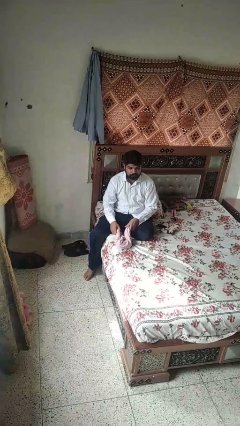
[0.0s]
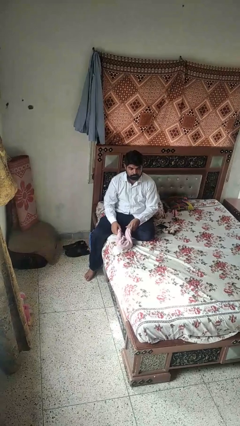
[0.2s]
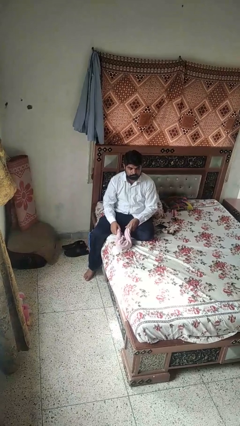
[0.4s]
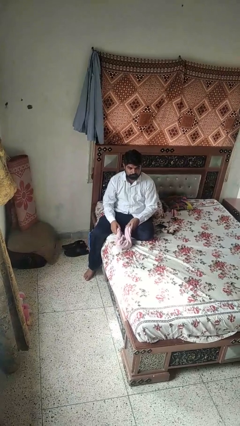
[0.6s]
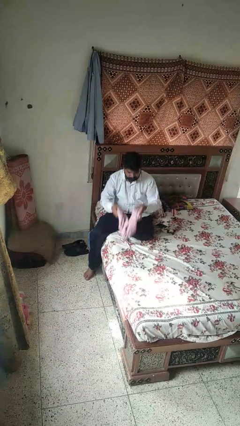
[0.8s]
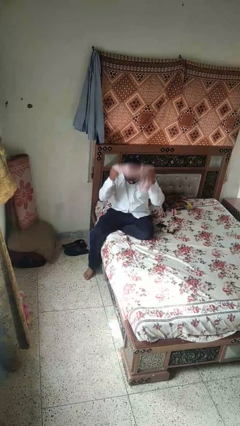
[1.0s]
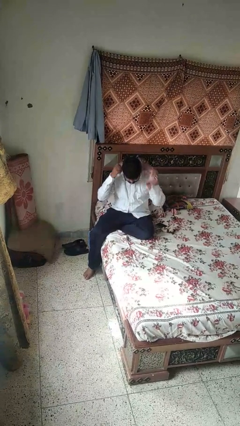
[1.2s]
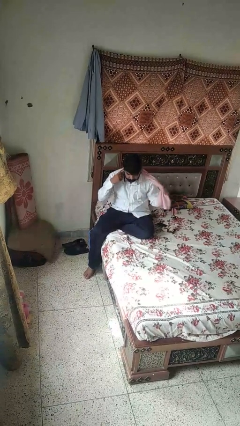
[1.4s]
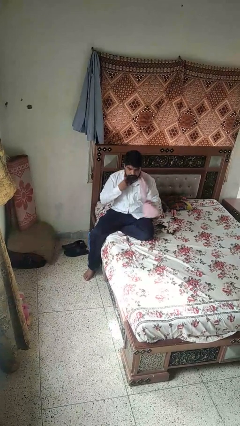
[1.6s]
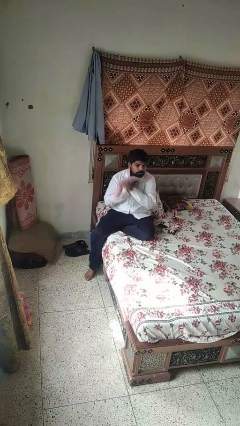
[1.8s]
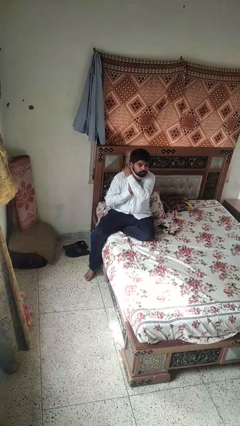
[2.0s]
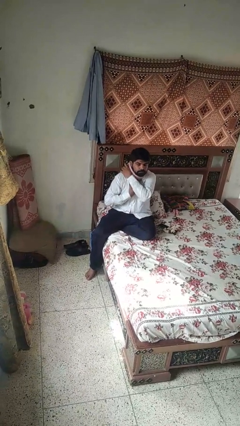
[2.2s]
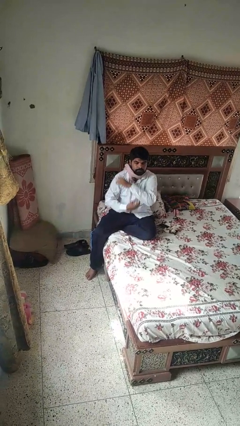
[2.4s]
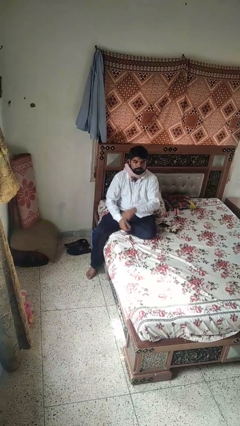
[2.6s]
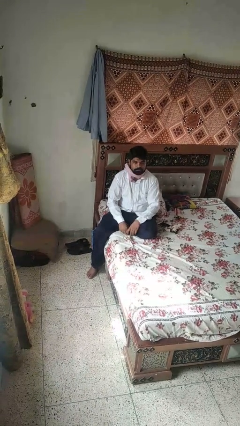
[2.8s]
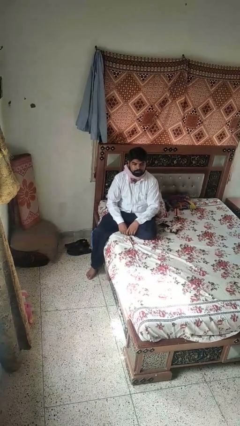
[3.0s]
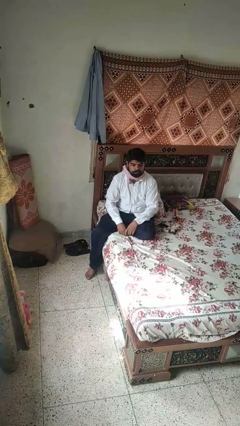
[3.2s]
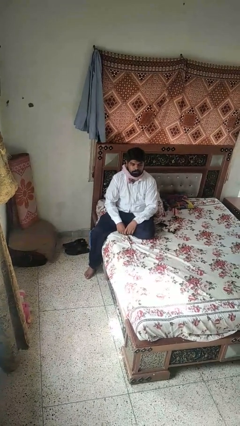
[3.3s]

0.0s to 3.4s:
person puts on scarf

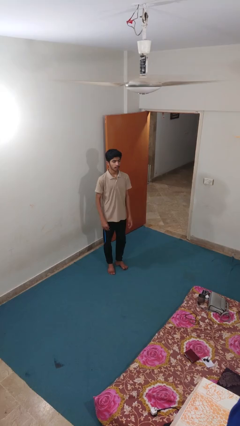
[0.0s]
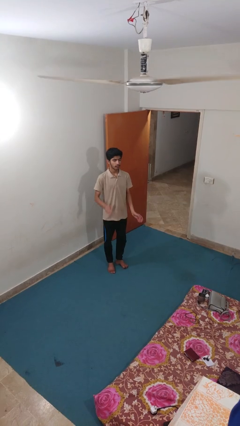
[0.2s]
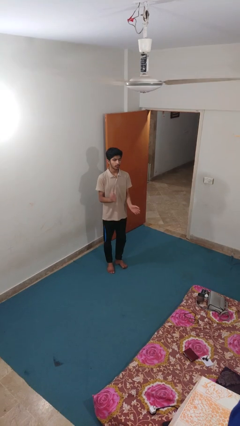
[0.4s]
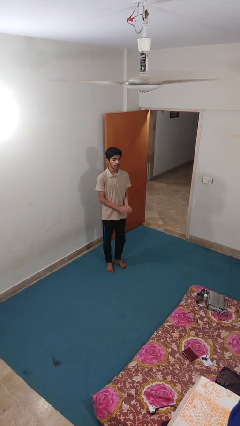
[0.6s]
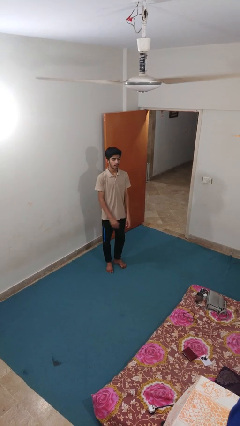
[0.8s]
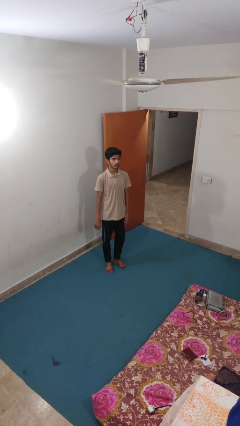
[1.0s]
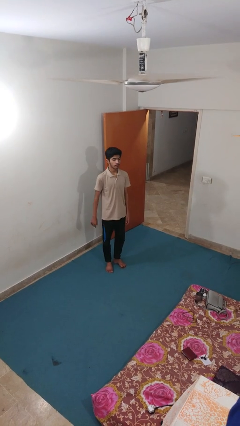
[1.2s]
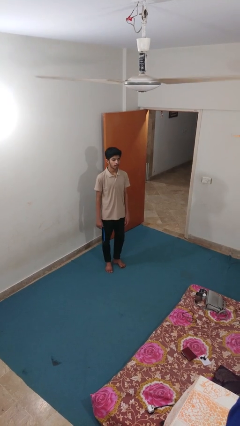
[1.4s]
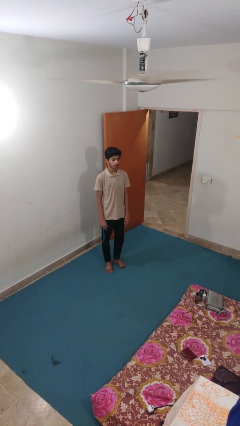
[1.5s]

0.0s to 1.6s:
person claps hands

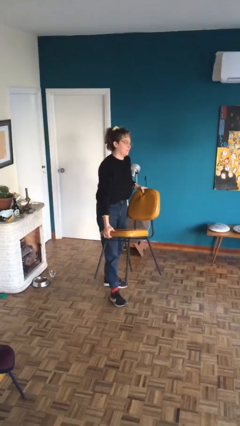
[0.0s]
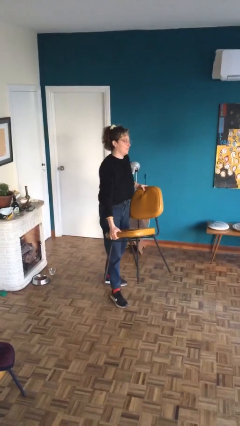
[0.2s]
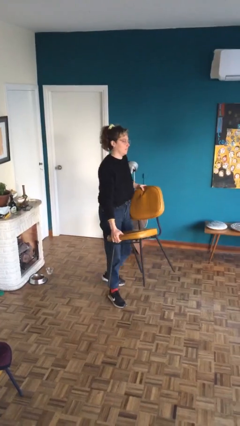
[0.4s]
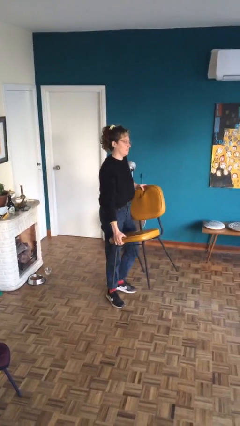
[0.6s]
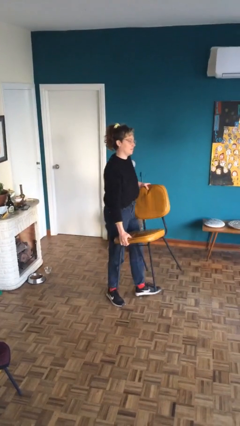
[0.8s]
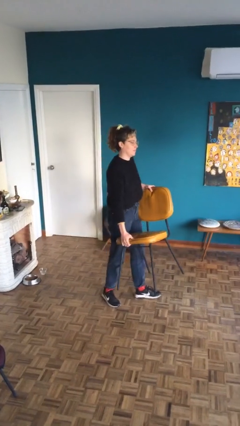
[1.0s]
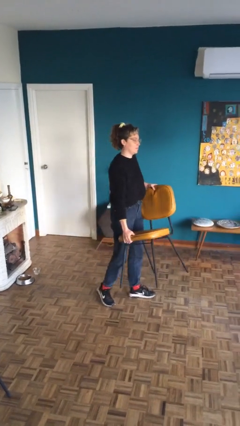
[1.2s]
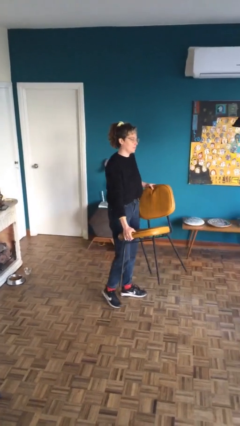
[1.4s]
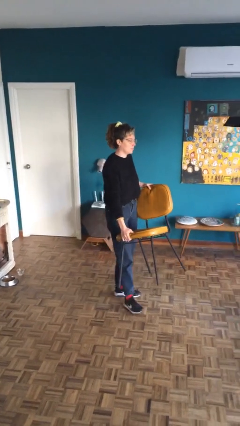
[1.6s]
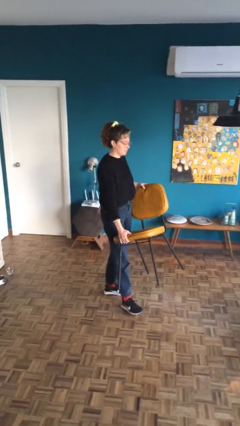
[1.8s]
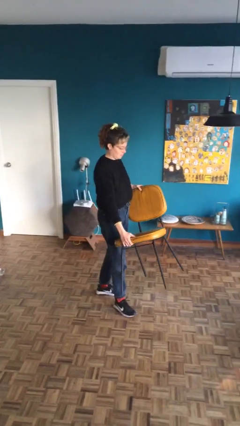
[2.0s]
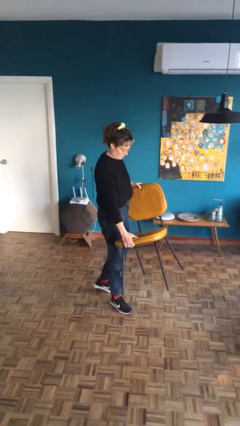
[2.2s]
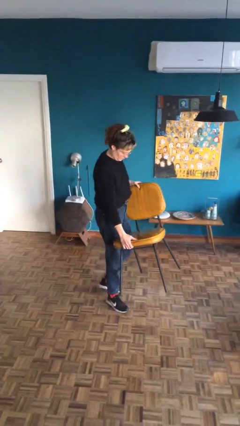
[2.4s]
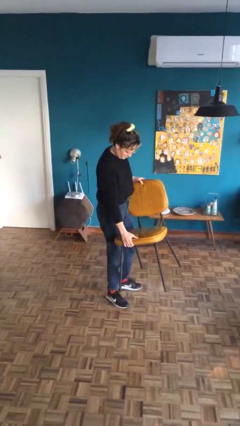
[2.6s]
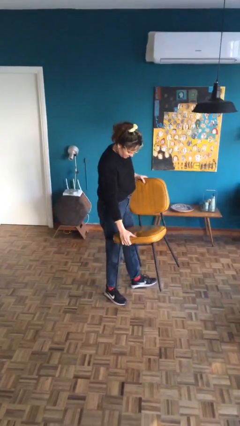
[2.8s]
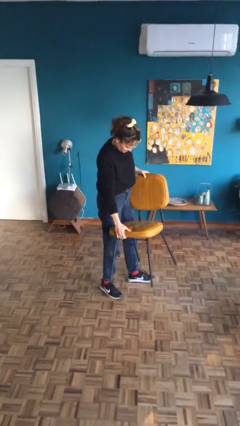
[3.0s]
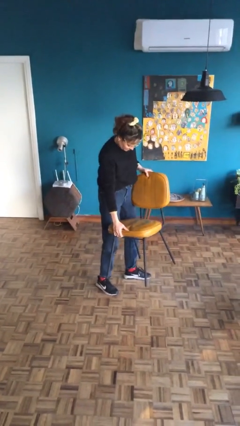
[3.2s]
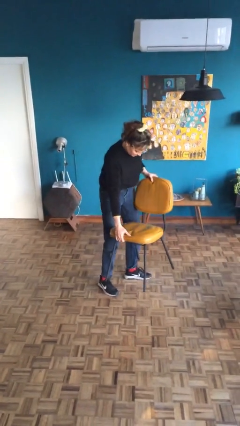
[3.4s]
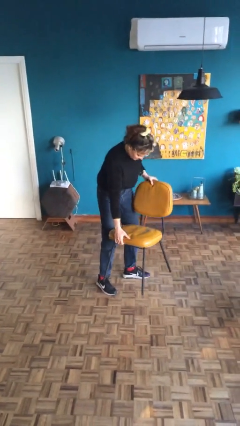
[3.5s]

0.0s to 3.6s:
person carries heavy object

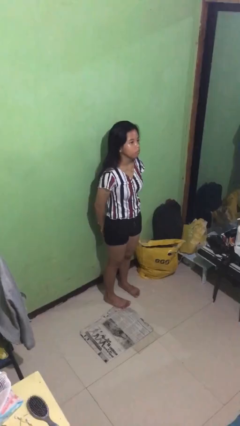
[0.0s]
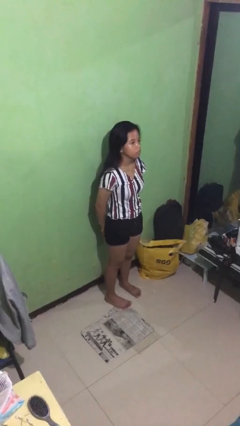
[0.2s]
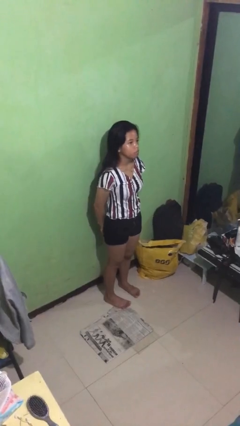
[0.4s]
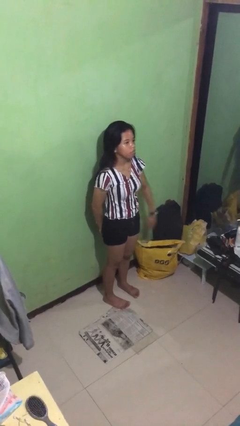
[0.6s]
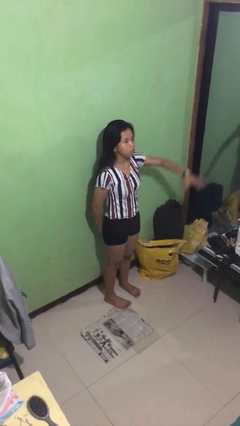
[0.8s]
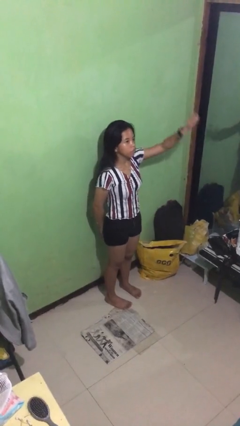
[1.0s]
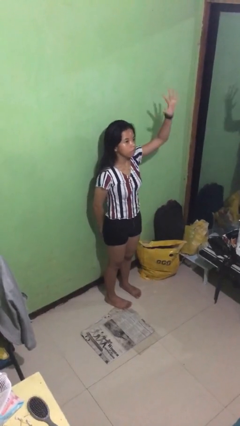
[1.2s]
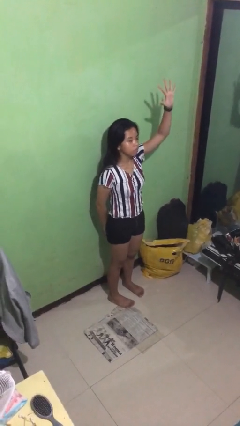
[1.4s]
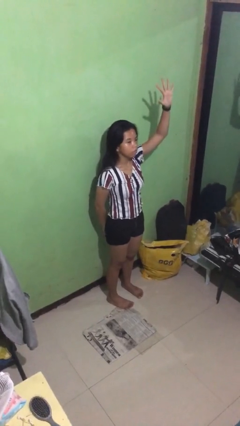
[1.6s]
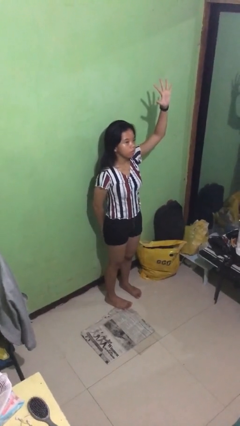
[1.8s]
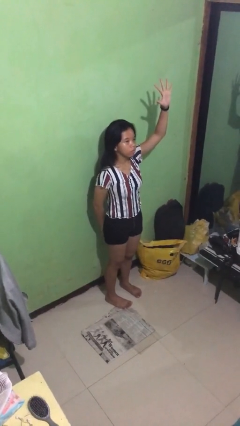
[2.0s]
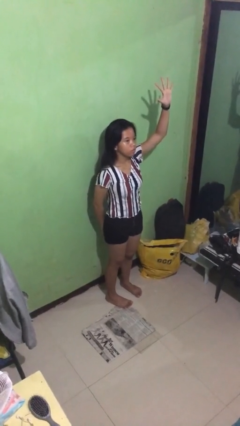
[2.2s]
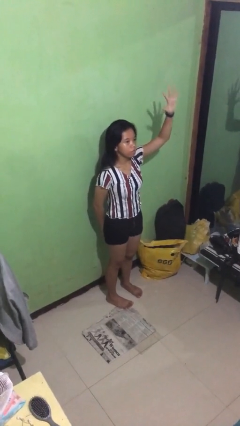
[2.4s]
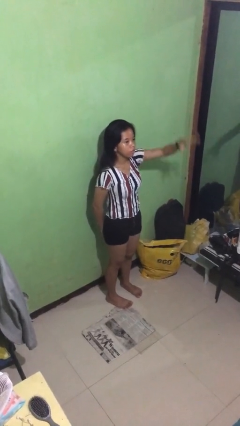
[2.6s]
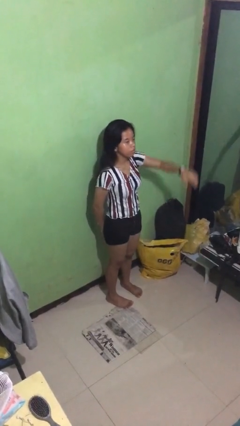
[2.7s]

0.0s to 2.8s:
person gestures number five

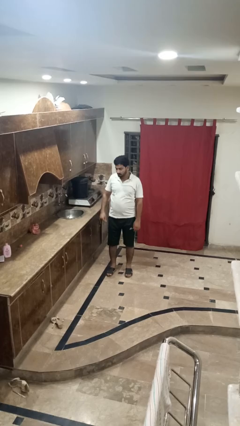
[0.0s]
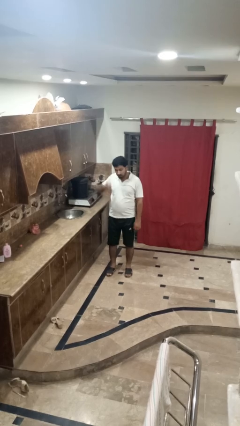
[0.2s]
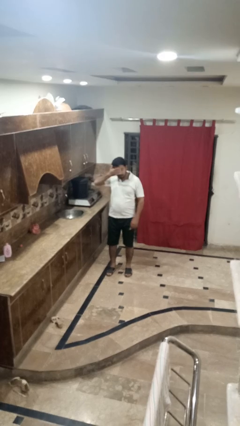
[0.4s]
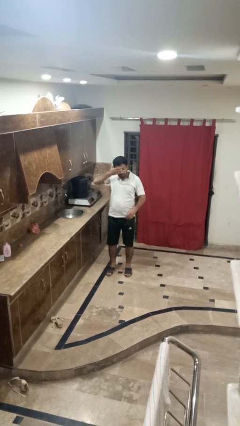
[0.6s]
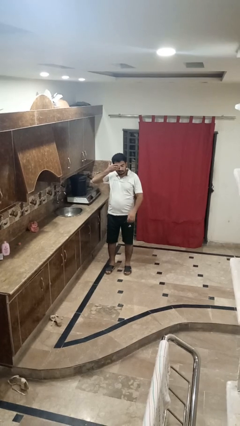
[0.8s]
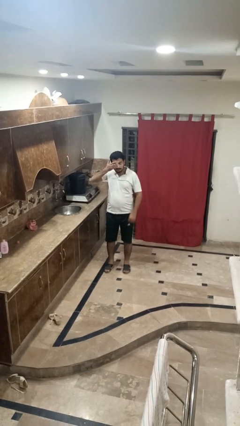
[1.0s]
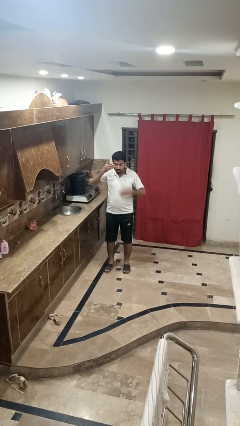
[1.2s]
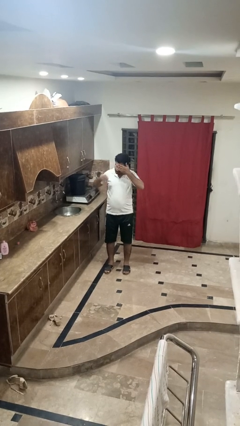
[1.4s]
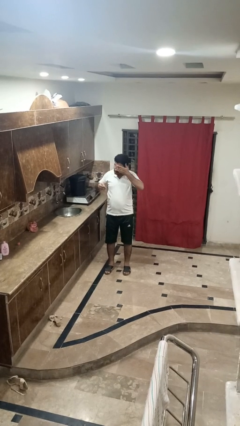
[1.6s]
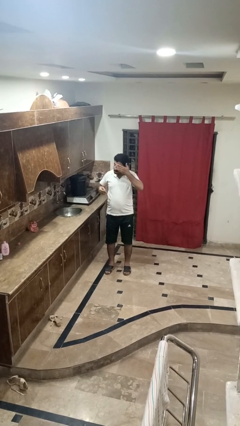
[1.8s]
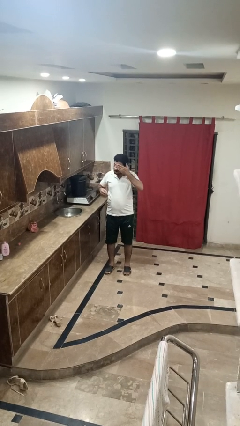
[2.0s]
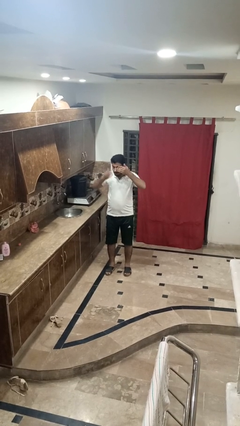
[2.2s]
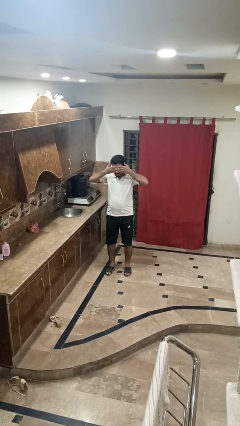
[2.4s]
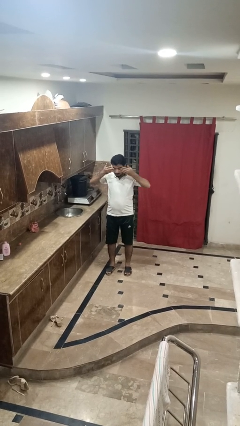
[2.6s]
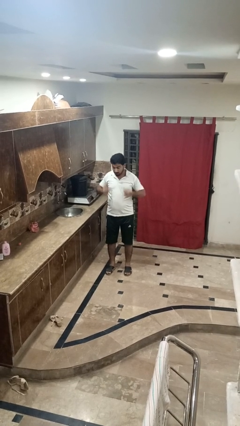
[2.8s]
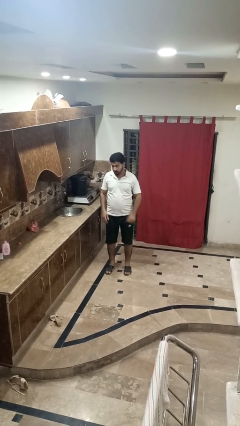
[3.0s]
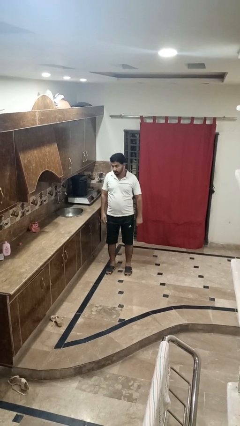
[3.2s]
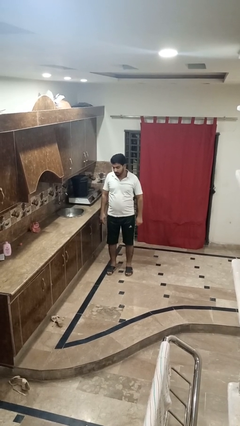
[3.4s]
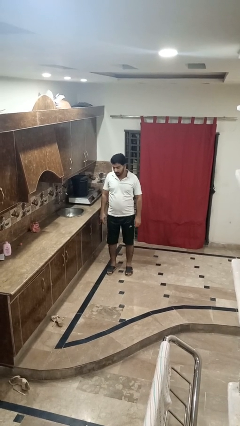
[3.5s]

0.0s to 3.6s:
person rubs eyes

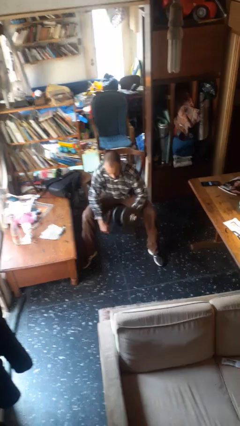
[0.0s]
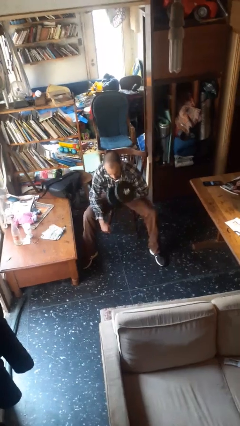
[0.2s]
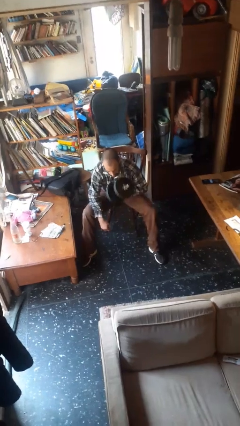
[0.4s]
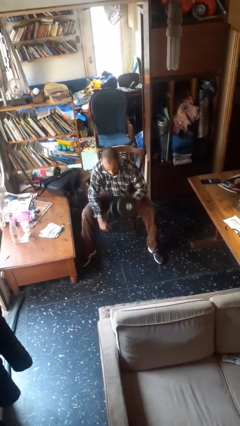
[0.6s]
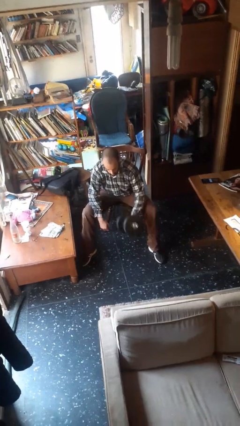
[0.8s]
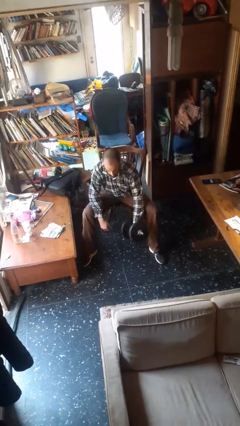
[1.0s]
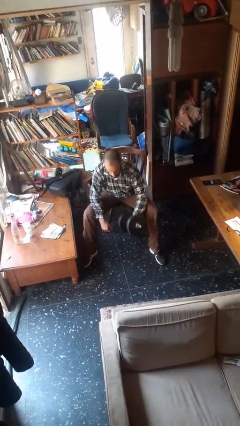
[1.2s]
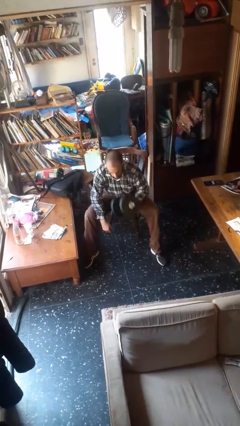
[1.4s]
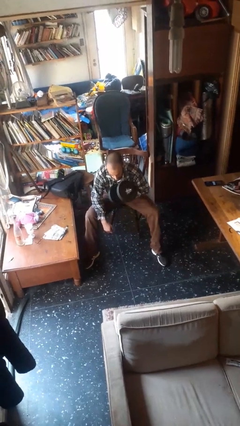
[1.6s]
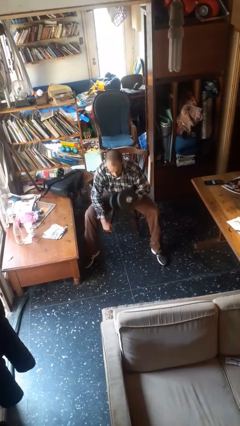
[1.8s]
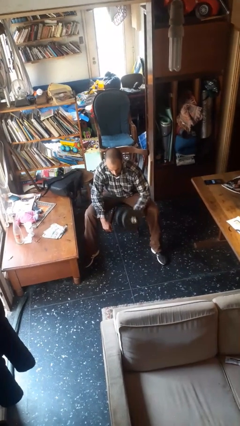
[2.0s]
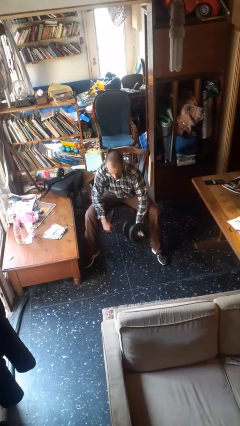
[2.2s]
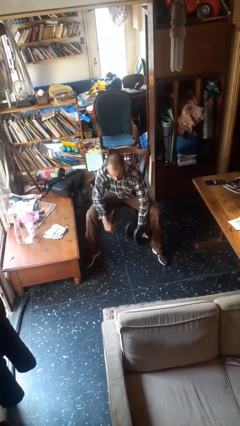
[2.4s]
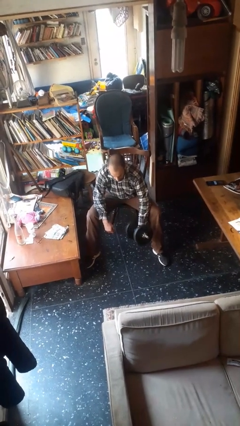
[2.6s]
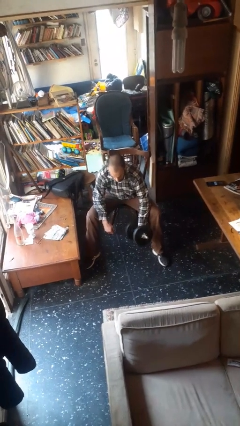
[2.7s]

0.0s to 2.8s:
person lifts dumbbells
